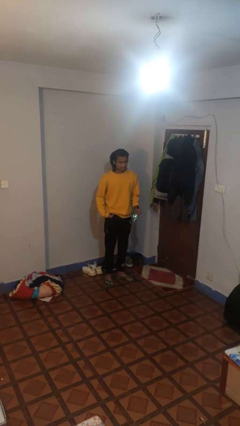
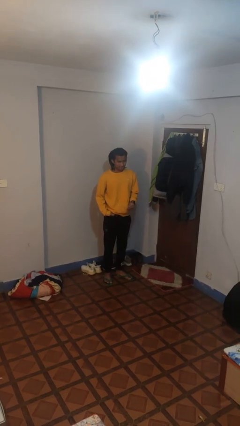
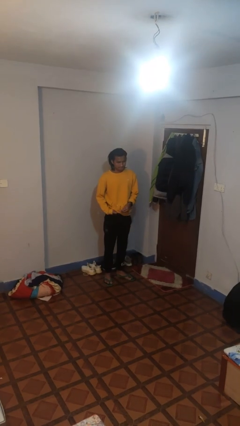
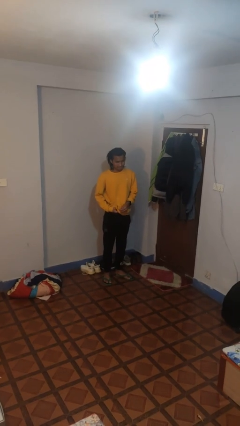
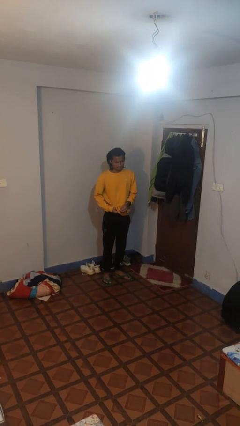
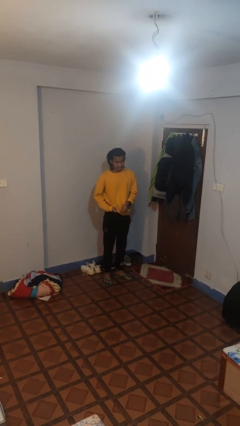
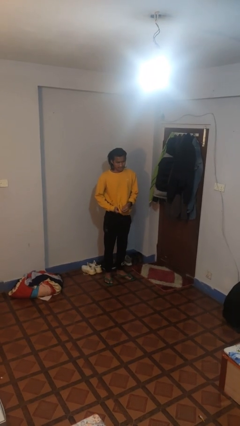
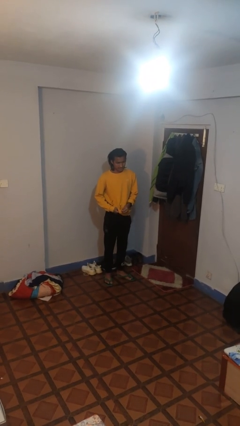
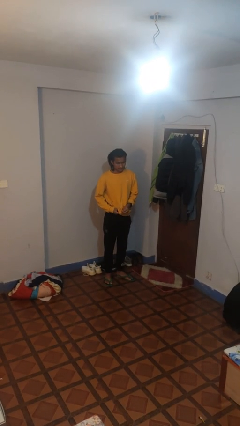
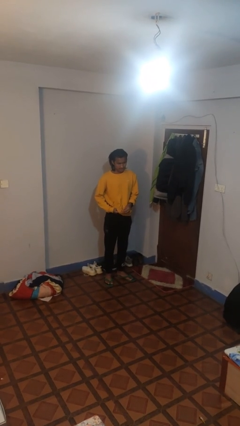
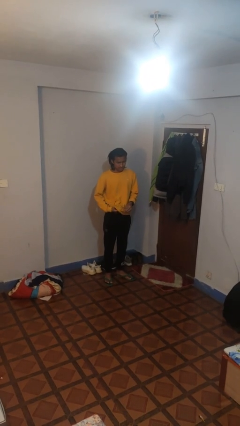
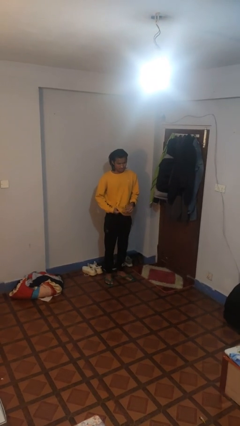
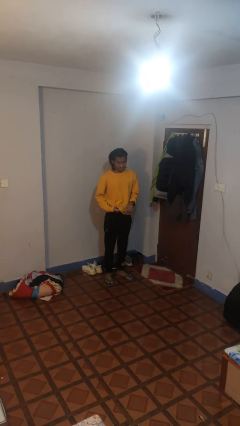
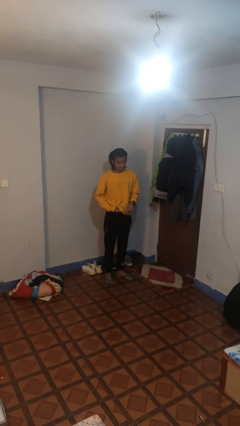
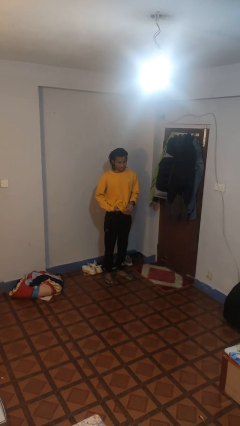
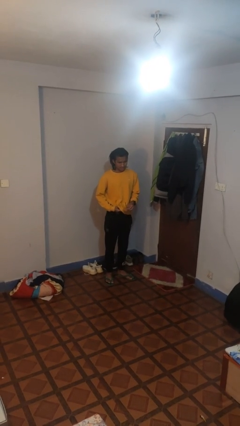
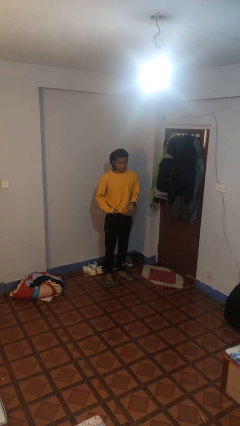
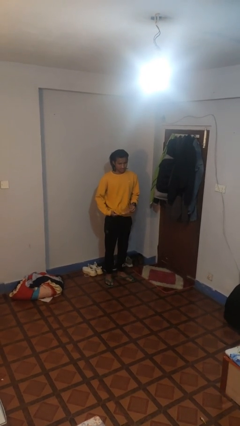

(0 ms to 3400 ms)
person cleans eyeglasses

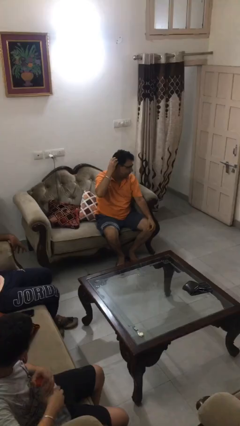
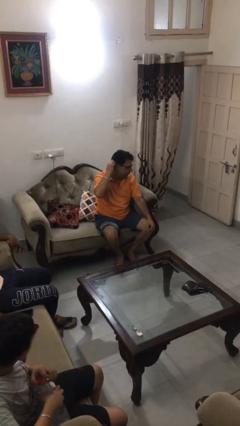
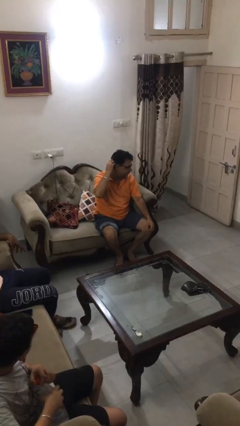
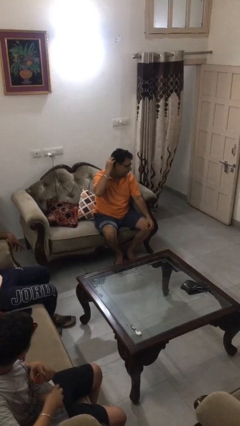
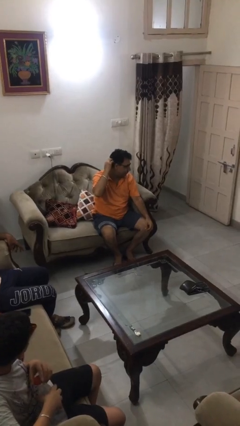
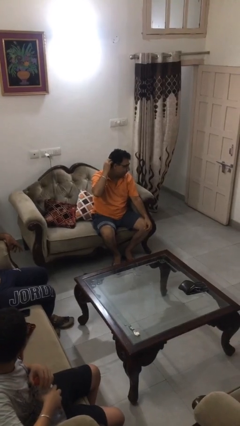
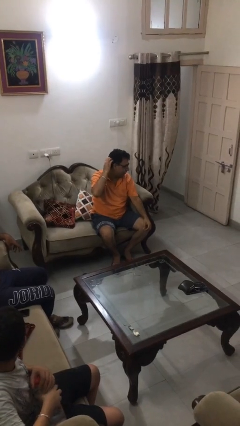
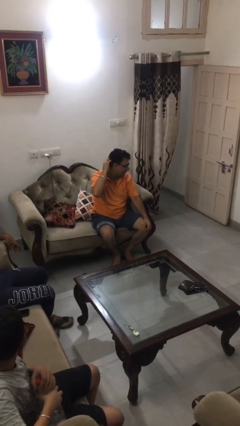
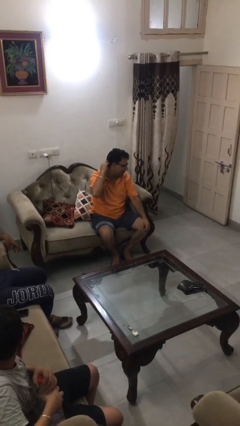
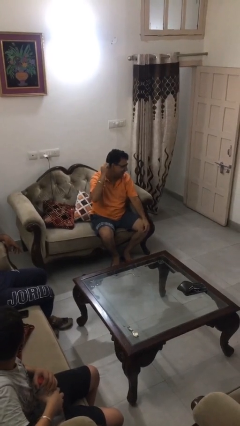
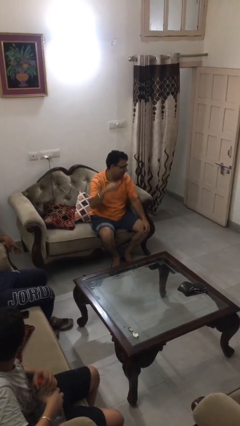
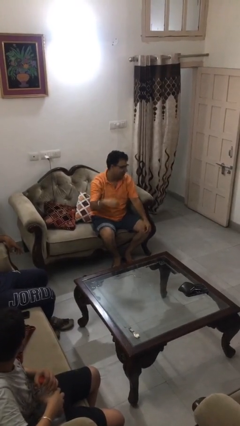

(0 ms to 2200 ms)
person scratches face

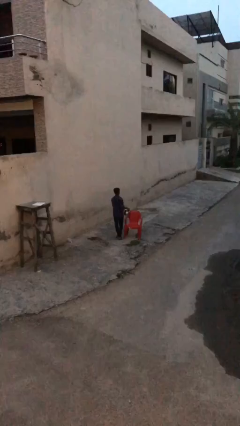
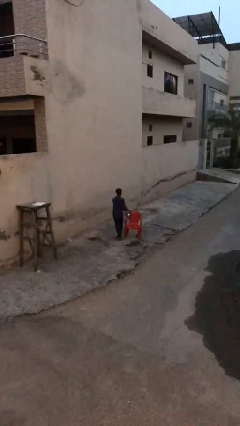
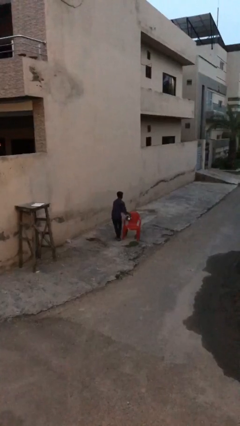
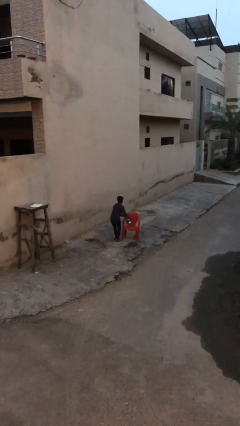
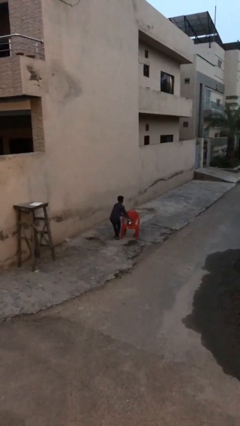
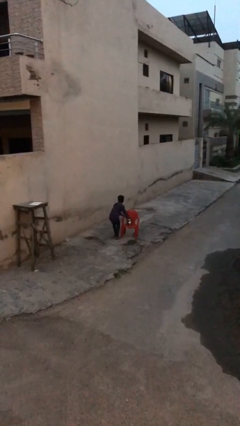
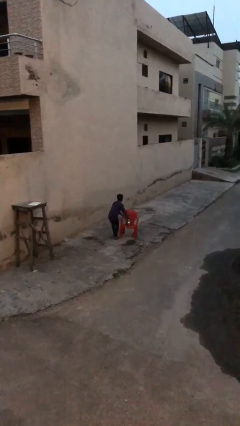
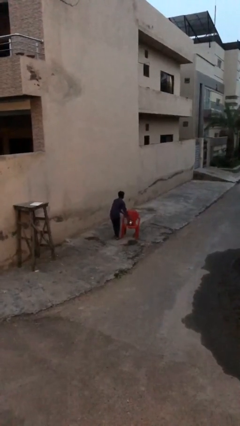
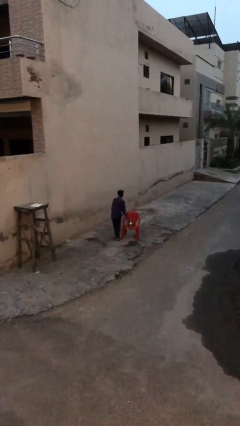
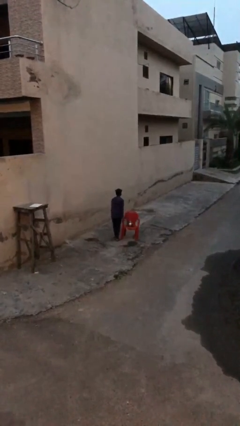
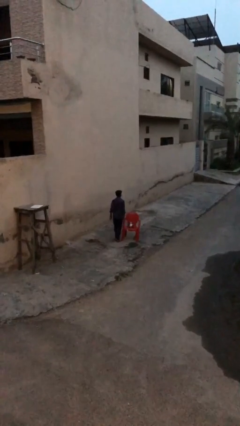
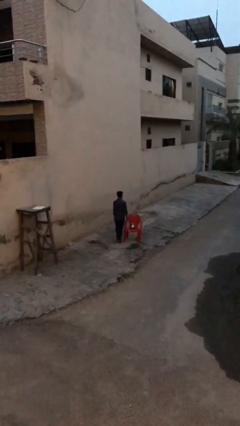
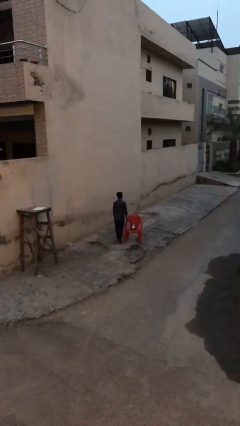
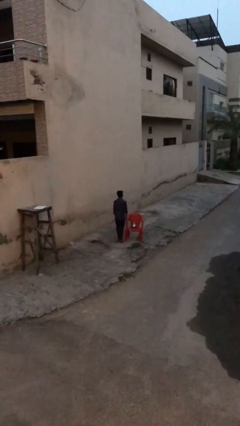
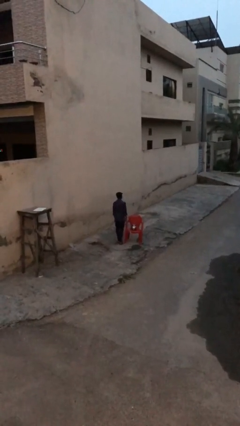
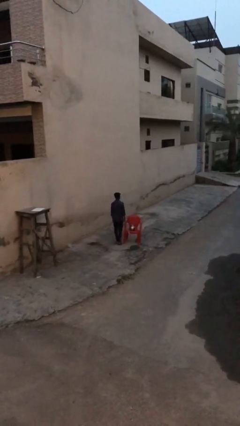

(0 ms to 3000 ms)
person puts down object on table

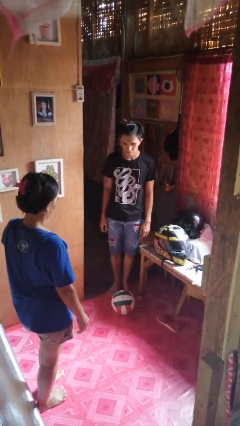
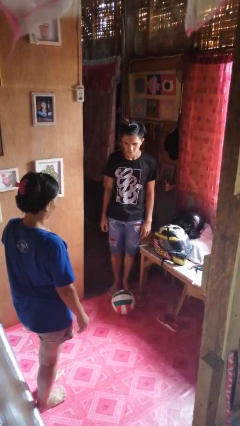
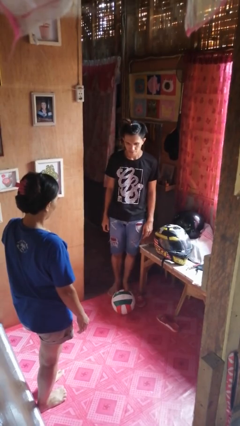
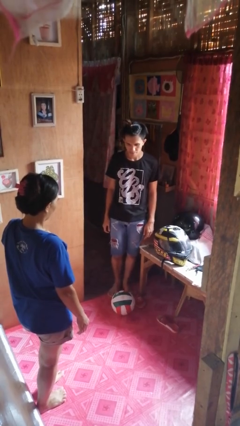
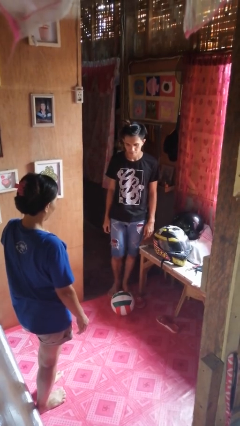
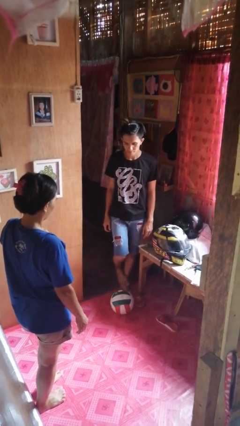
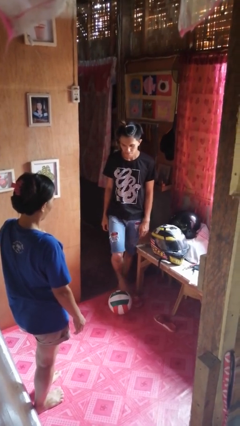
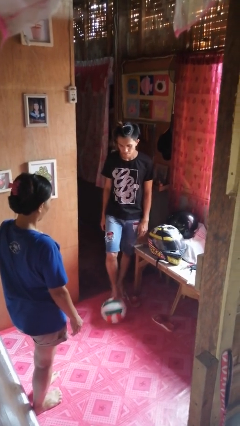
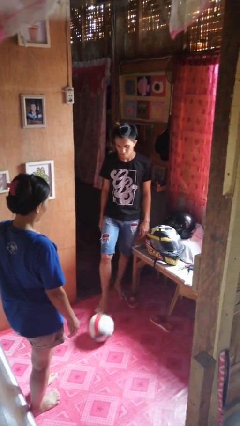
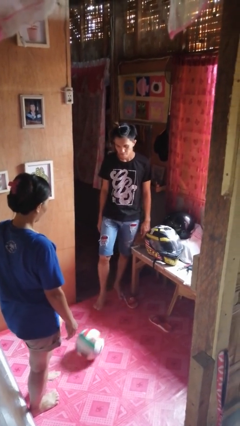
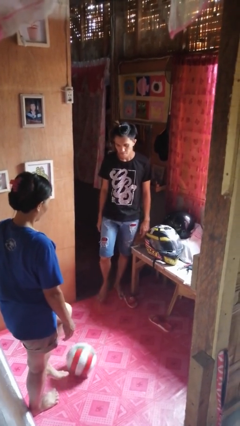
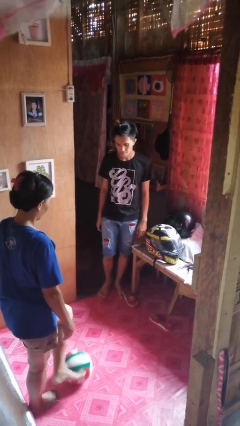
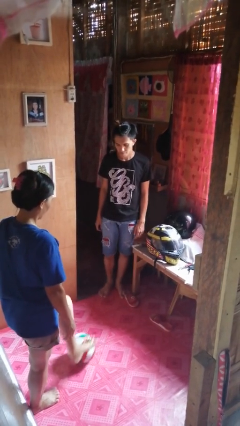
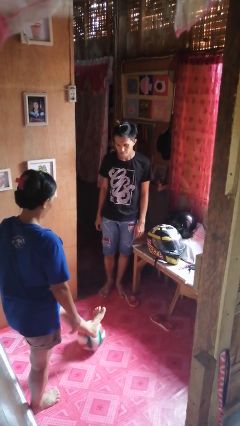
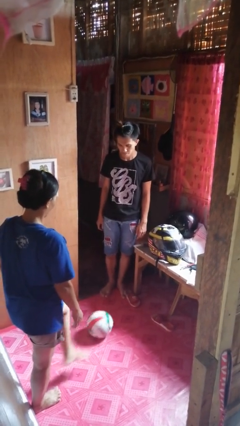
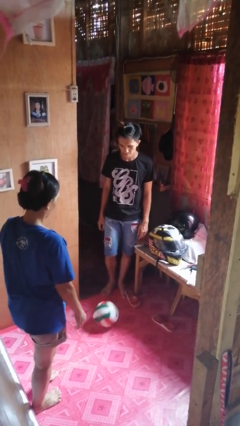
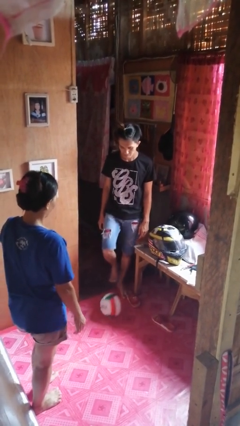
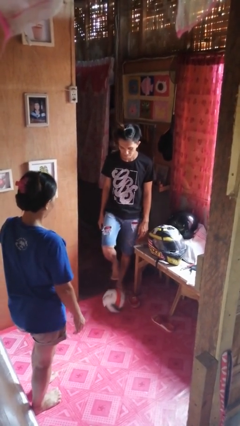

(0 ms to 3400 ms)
person kicks object to person

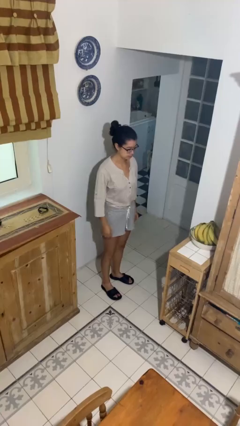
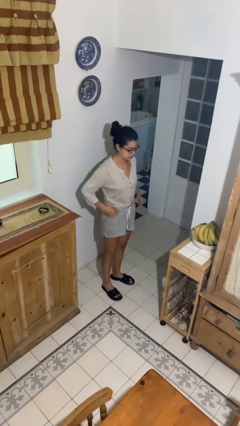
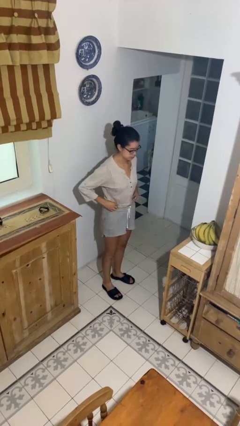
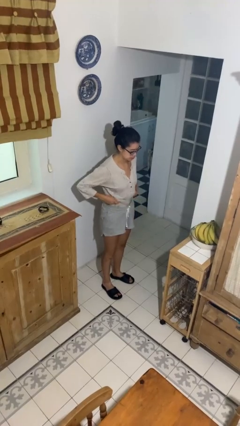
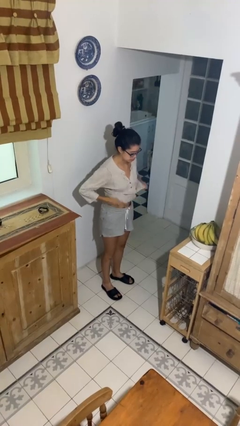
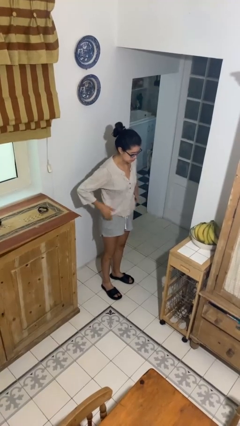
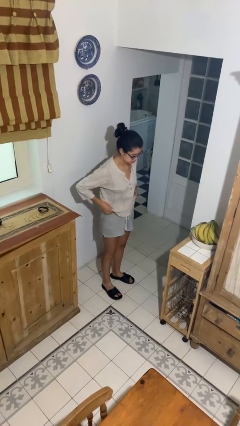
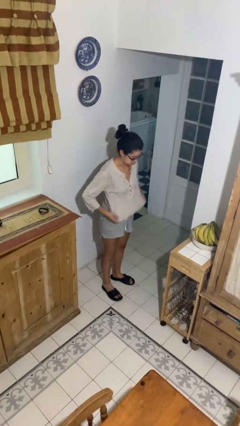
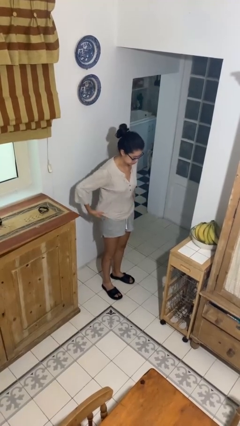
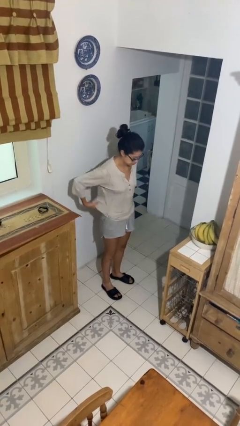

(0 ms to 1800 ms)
person untucks shirt

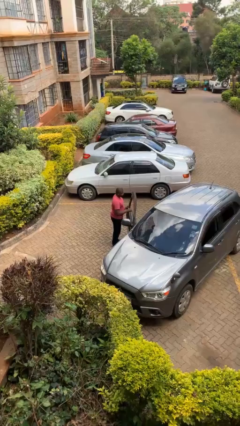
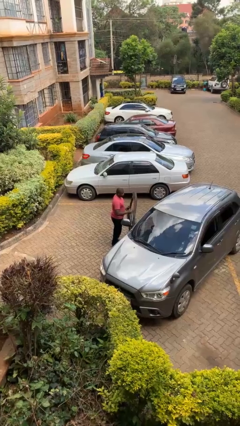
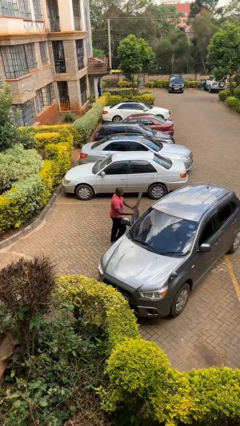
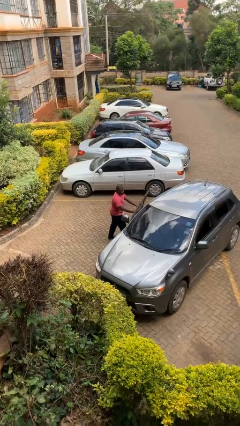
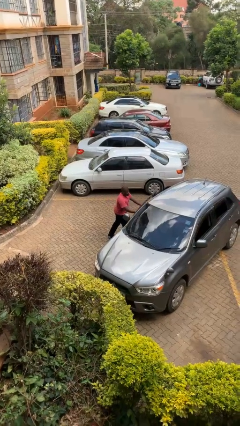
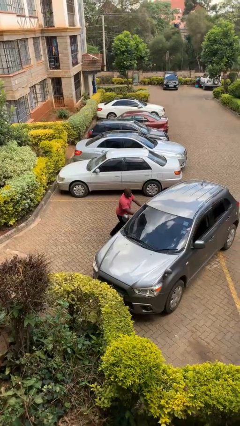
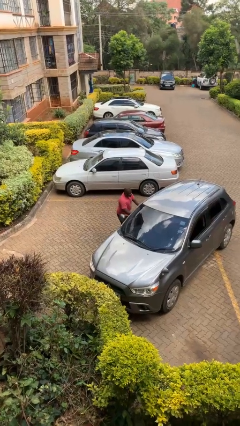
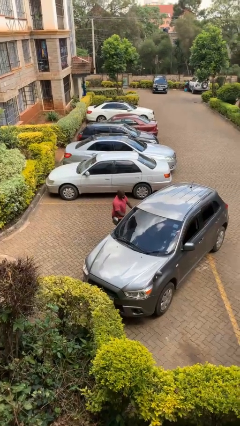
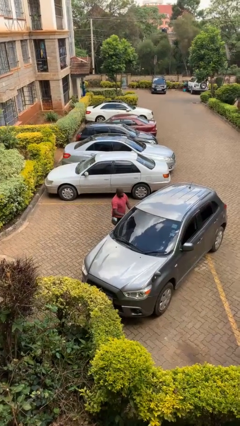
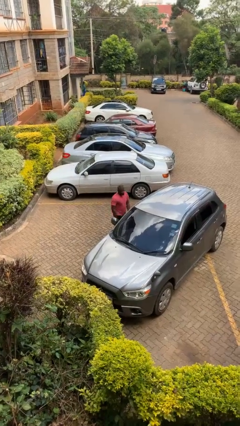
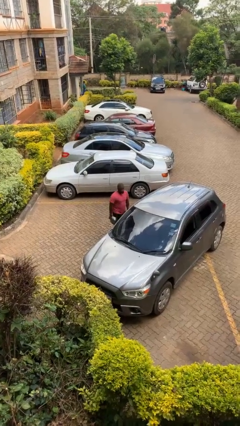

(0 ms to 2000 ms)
person closes car door
